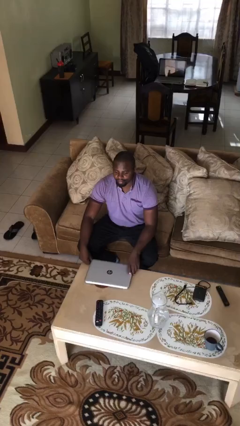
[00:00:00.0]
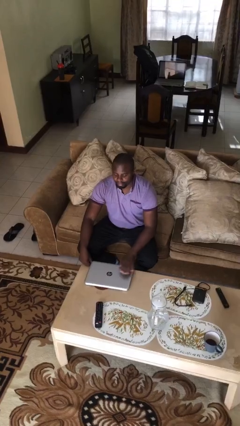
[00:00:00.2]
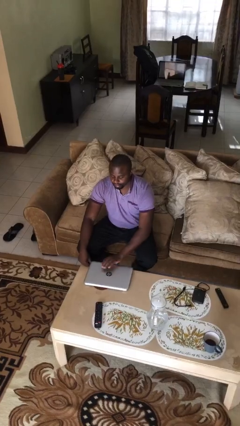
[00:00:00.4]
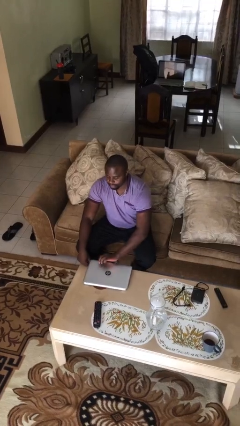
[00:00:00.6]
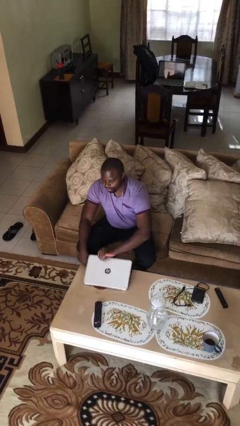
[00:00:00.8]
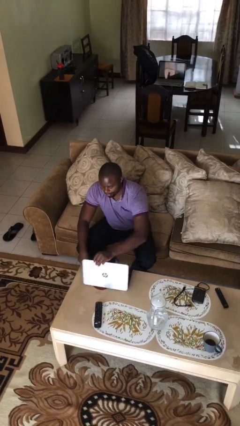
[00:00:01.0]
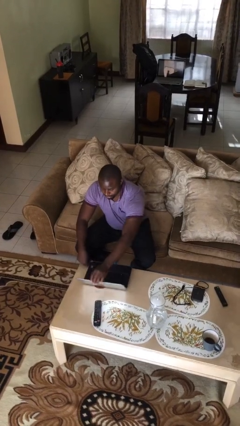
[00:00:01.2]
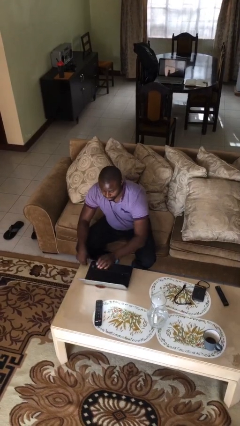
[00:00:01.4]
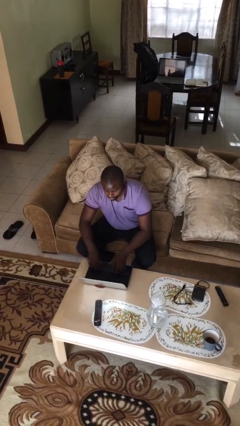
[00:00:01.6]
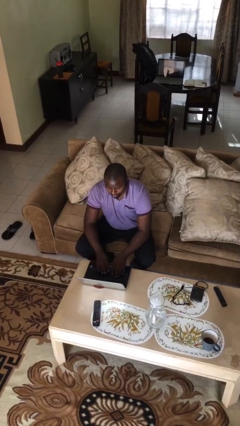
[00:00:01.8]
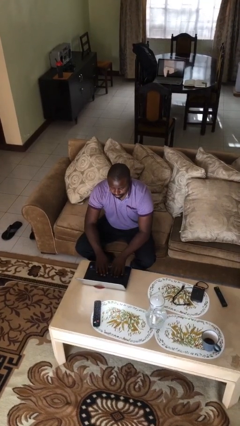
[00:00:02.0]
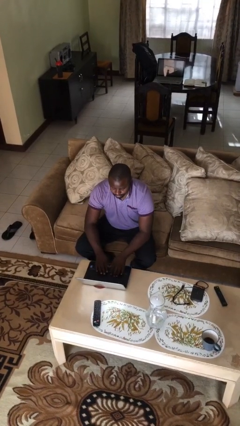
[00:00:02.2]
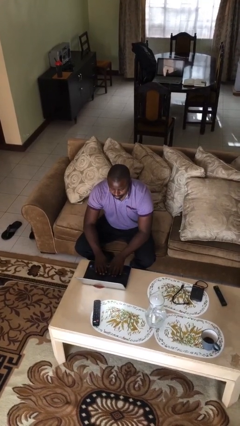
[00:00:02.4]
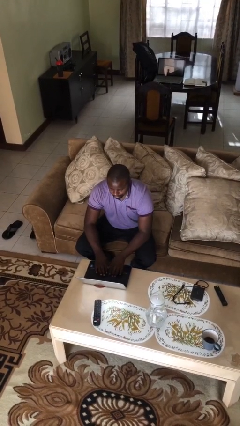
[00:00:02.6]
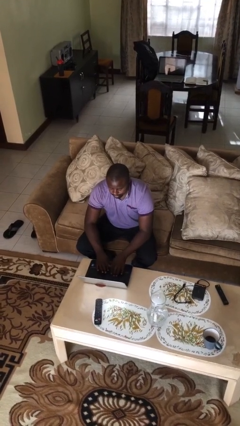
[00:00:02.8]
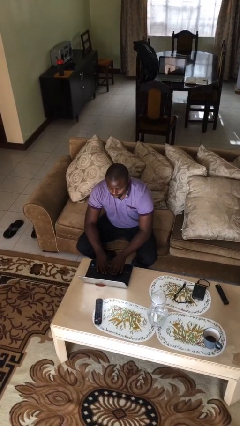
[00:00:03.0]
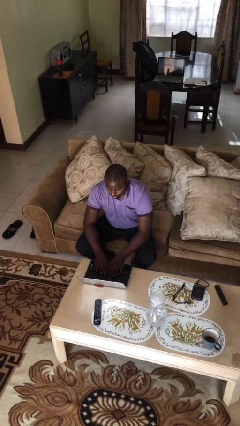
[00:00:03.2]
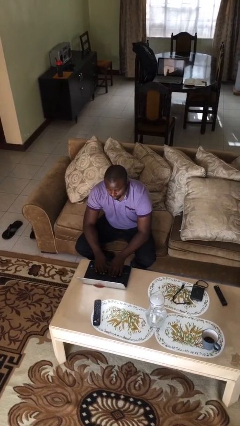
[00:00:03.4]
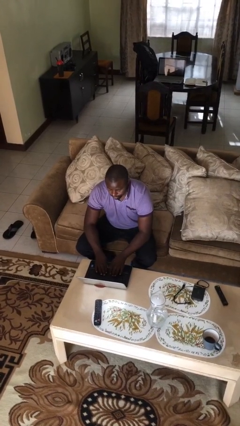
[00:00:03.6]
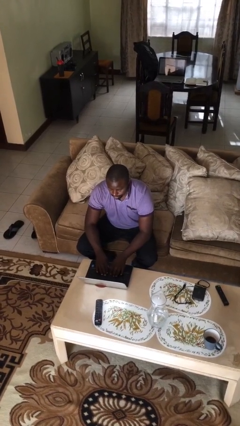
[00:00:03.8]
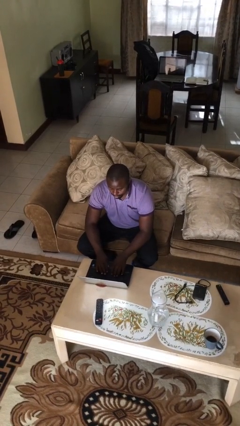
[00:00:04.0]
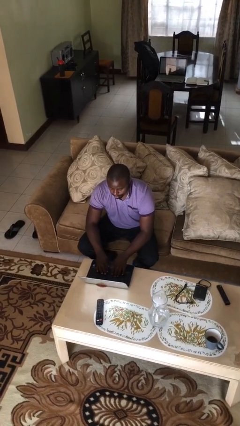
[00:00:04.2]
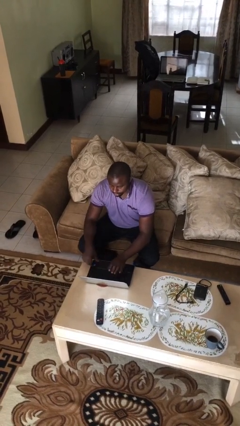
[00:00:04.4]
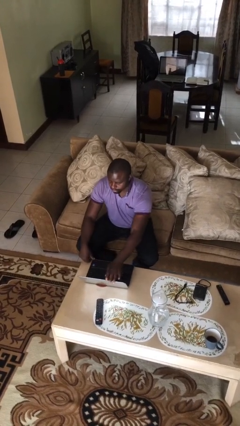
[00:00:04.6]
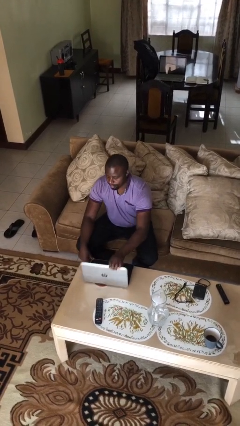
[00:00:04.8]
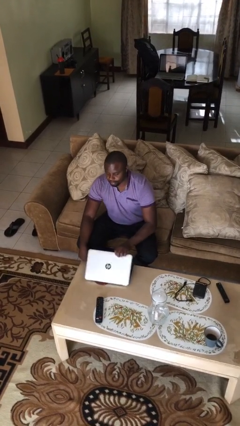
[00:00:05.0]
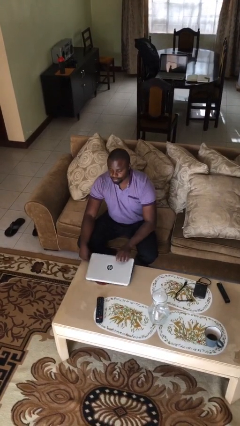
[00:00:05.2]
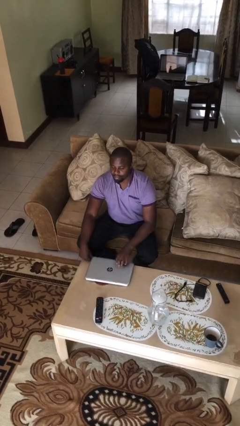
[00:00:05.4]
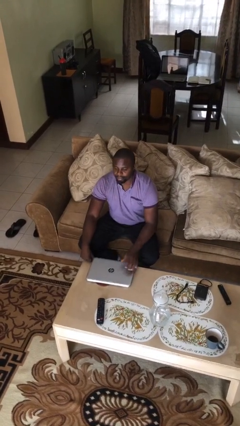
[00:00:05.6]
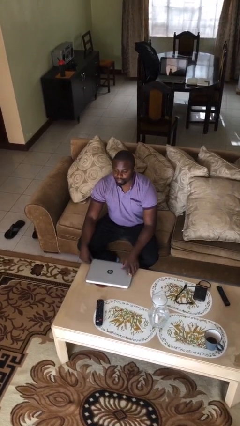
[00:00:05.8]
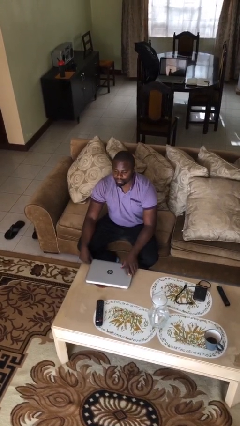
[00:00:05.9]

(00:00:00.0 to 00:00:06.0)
person interacts with laptop

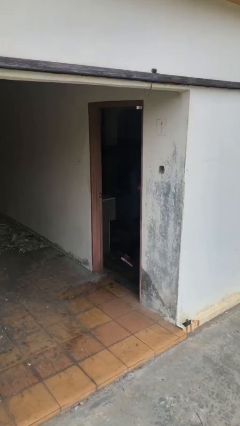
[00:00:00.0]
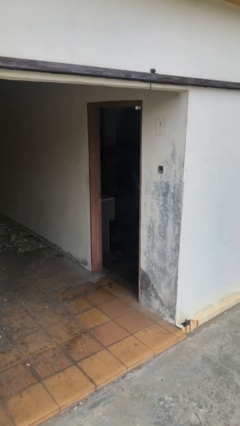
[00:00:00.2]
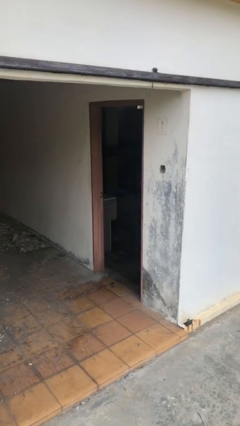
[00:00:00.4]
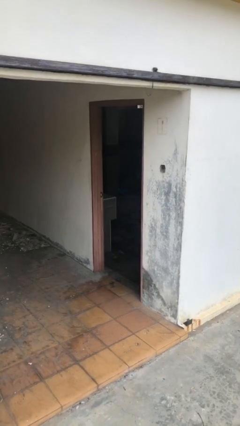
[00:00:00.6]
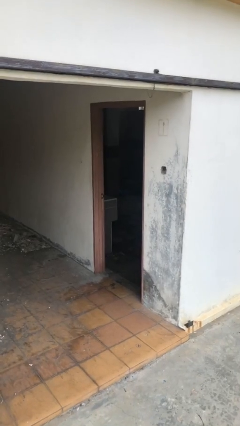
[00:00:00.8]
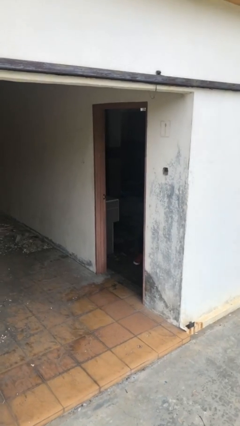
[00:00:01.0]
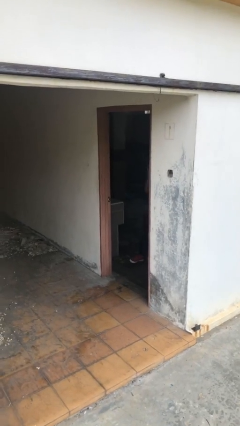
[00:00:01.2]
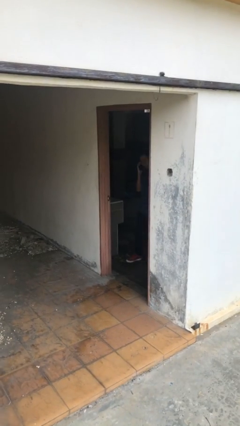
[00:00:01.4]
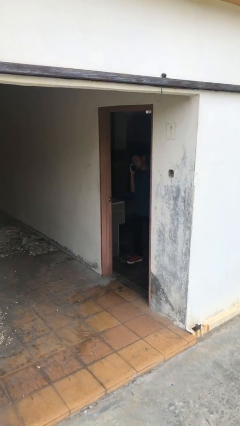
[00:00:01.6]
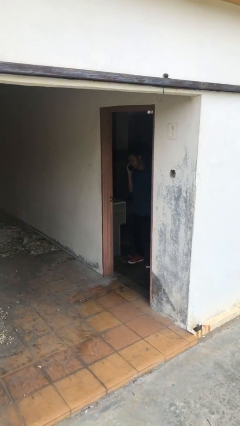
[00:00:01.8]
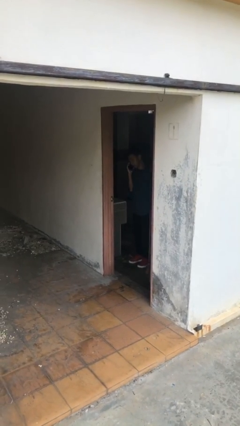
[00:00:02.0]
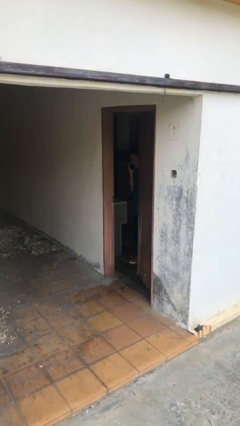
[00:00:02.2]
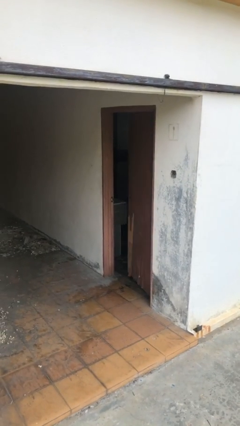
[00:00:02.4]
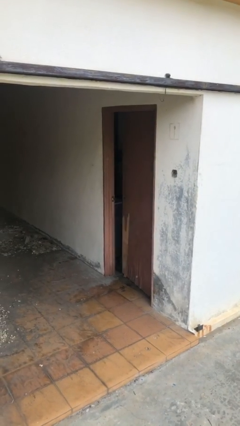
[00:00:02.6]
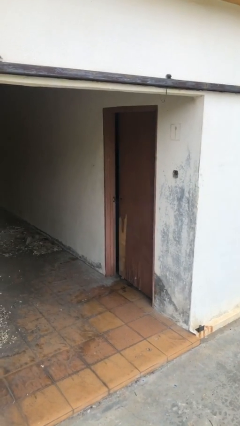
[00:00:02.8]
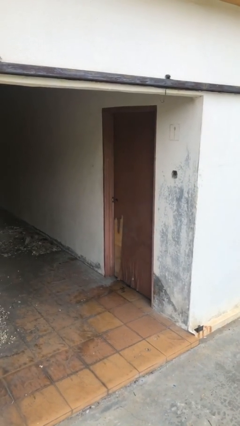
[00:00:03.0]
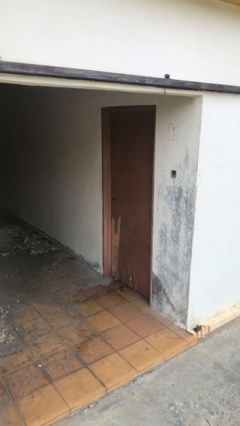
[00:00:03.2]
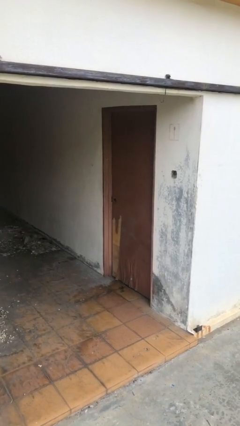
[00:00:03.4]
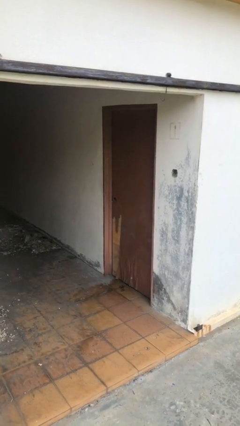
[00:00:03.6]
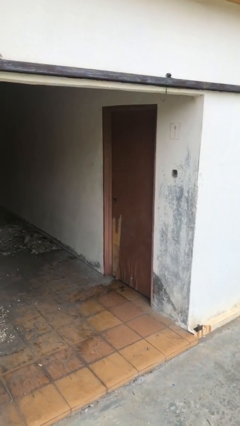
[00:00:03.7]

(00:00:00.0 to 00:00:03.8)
person closes facility door

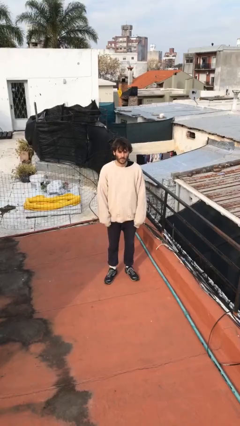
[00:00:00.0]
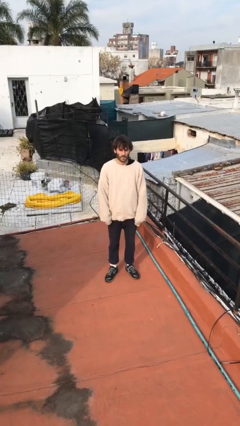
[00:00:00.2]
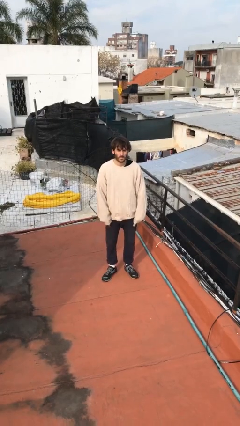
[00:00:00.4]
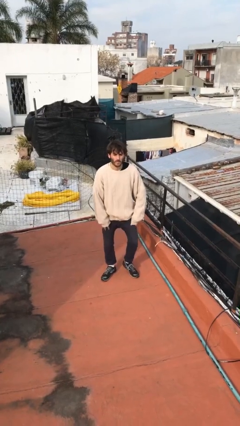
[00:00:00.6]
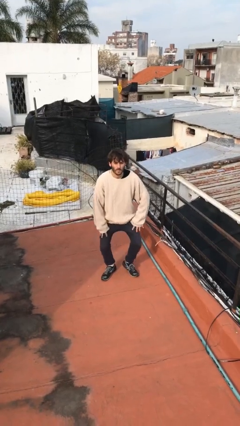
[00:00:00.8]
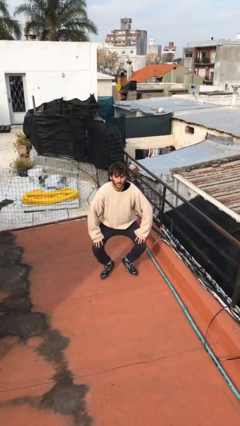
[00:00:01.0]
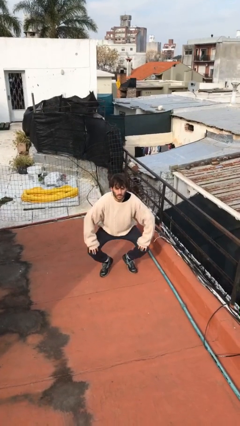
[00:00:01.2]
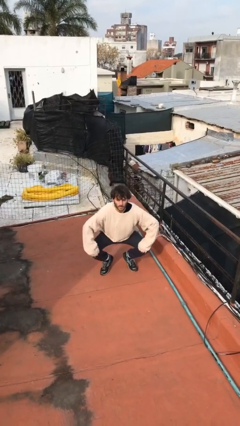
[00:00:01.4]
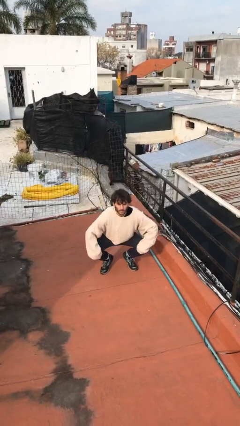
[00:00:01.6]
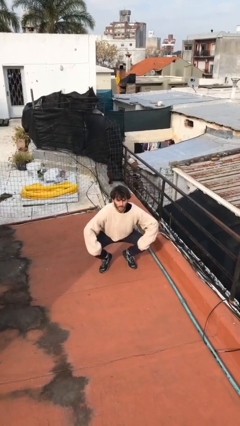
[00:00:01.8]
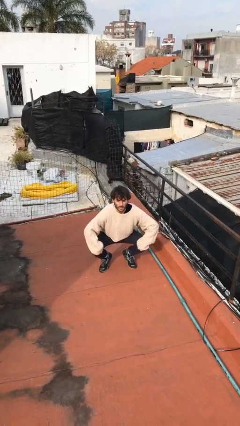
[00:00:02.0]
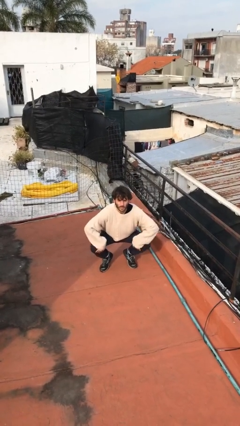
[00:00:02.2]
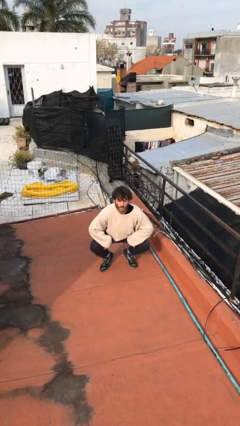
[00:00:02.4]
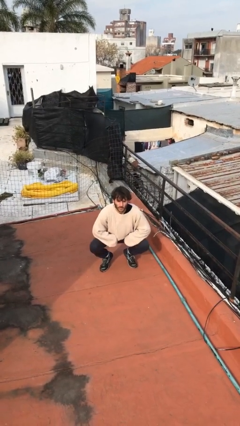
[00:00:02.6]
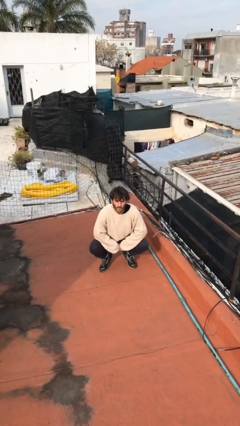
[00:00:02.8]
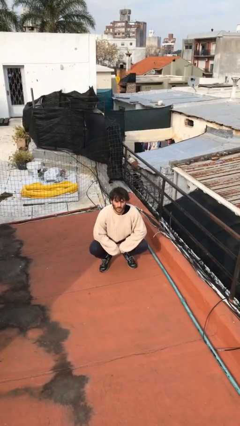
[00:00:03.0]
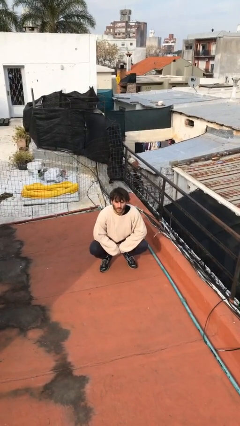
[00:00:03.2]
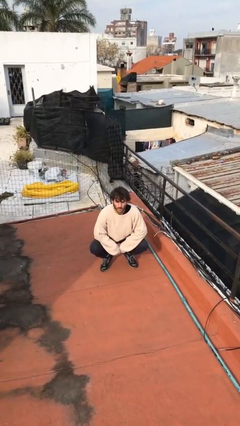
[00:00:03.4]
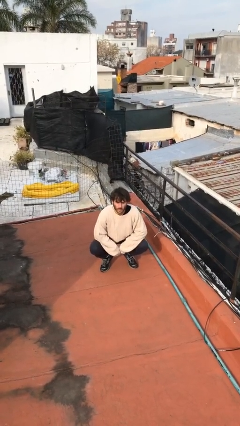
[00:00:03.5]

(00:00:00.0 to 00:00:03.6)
person squats

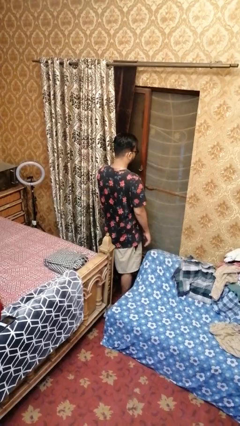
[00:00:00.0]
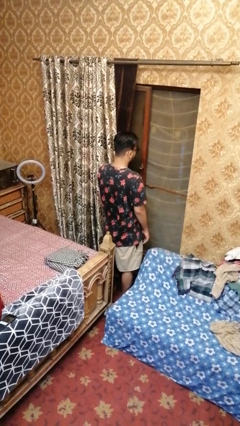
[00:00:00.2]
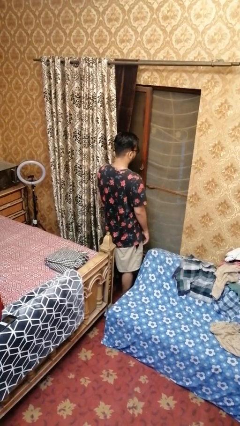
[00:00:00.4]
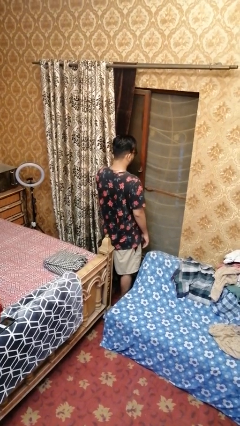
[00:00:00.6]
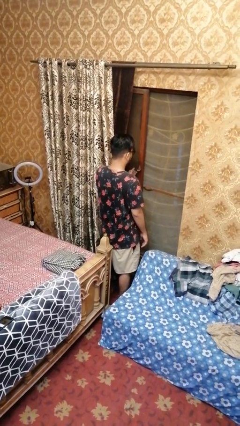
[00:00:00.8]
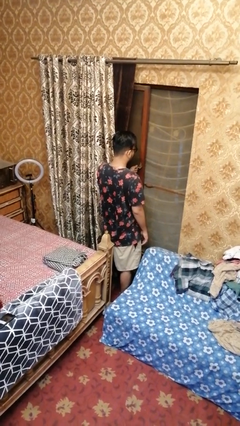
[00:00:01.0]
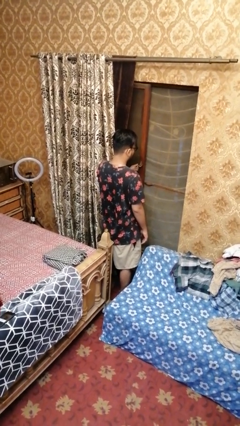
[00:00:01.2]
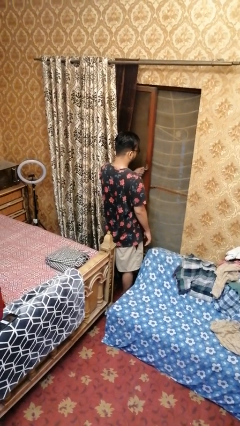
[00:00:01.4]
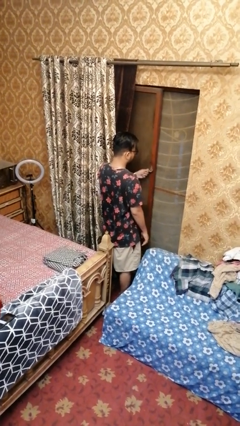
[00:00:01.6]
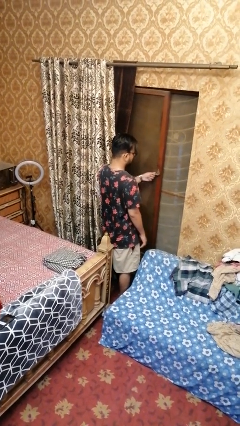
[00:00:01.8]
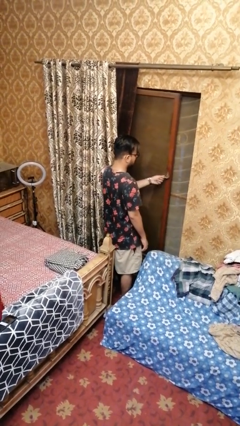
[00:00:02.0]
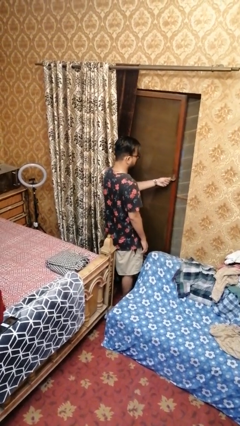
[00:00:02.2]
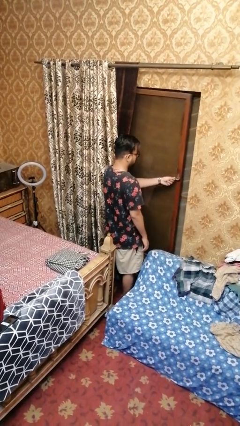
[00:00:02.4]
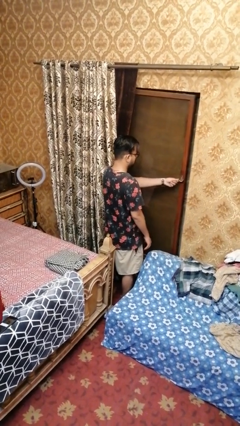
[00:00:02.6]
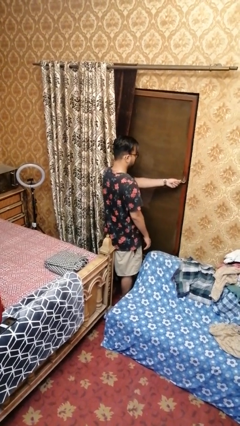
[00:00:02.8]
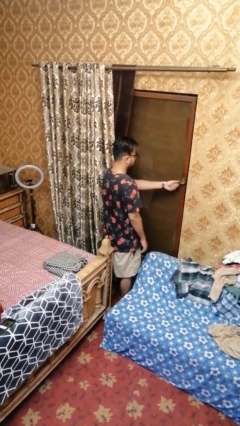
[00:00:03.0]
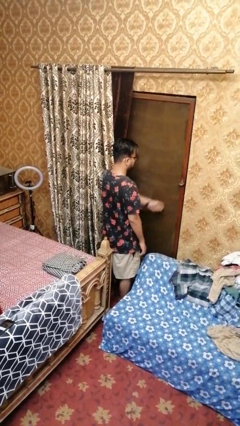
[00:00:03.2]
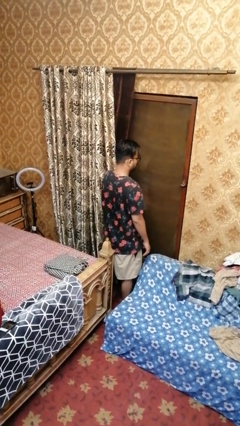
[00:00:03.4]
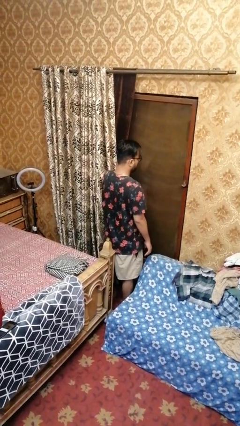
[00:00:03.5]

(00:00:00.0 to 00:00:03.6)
person closes home window

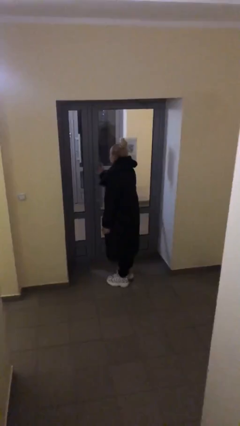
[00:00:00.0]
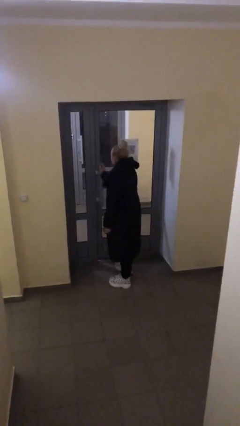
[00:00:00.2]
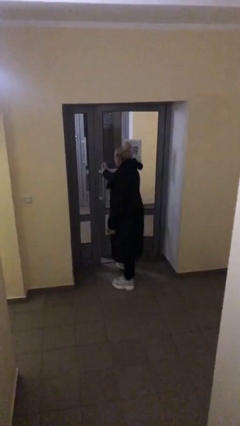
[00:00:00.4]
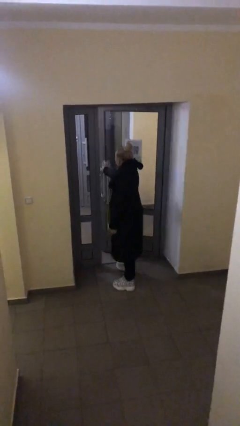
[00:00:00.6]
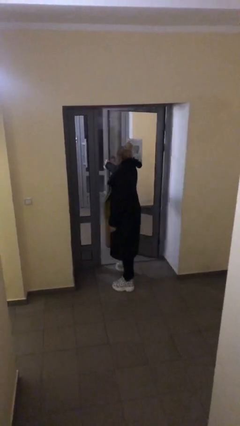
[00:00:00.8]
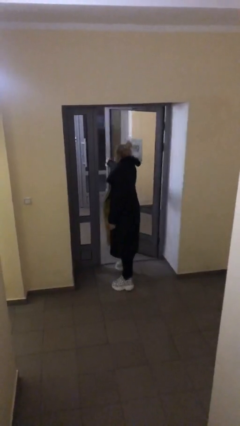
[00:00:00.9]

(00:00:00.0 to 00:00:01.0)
person opens facility door
